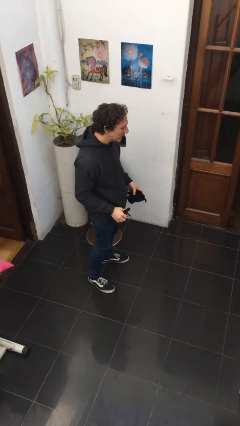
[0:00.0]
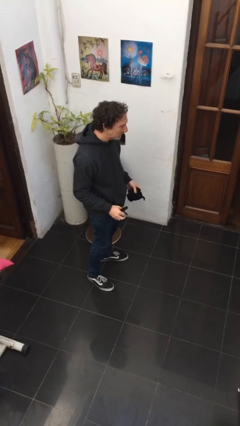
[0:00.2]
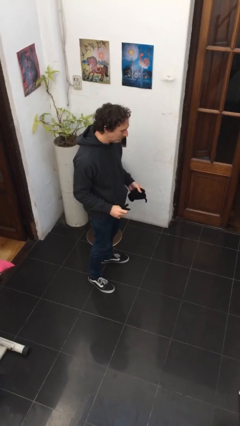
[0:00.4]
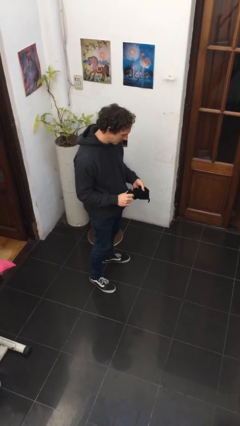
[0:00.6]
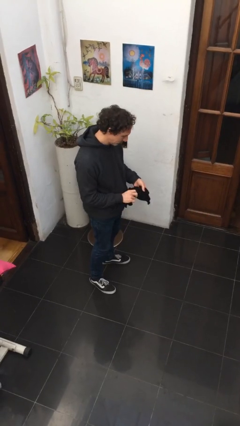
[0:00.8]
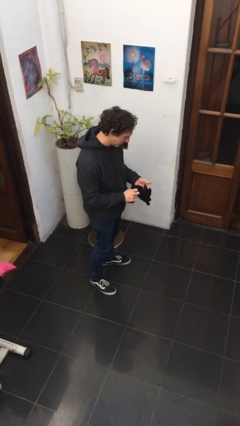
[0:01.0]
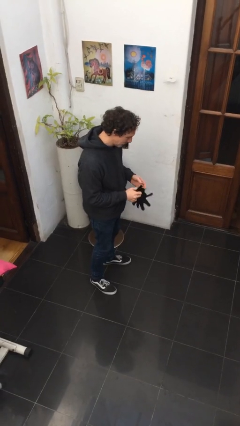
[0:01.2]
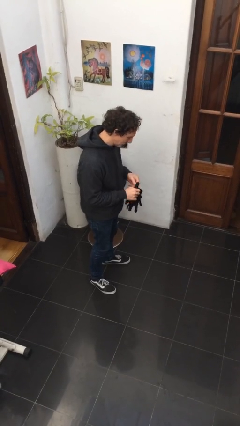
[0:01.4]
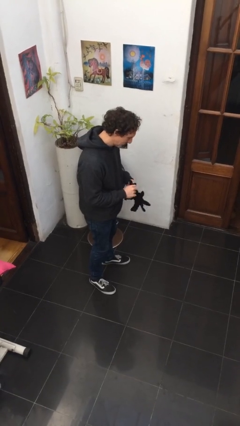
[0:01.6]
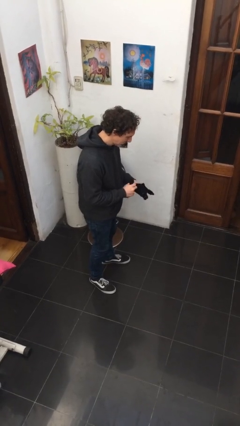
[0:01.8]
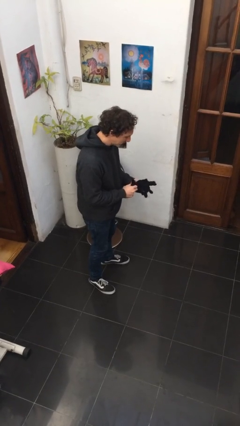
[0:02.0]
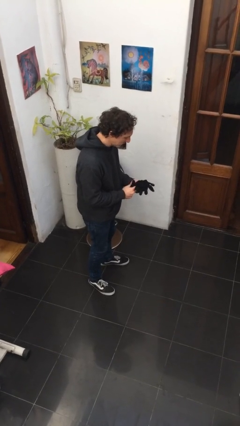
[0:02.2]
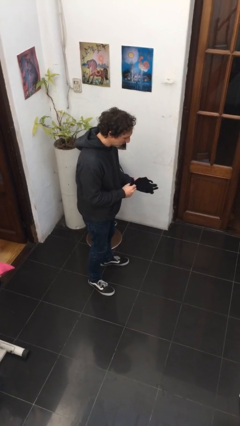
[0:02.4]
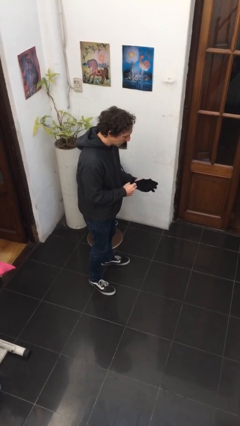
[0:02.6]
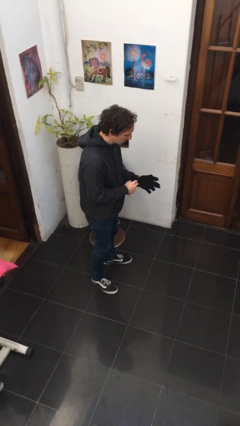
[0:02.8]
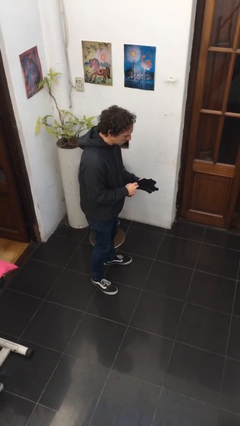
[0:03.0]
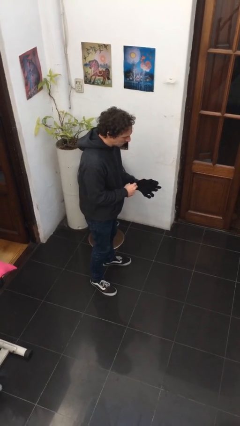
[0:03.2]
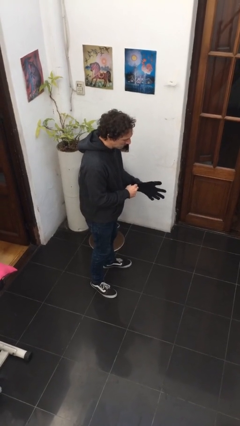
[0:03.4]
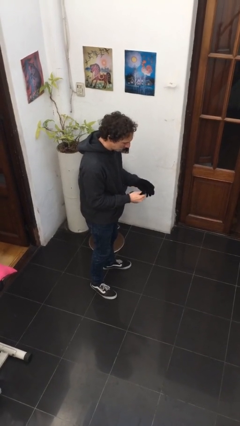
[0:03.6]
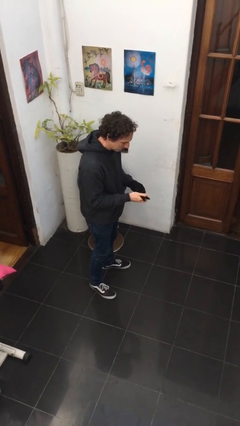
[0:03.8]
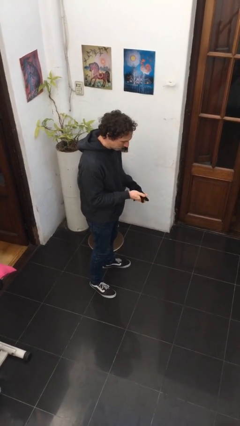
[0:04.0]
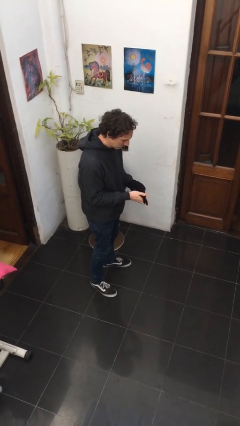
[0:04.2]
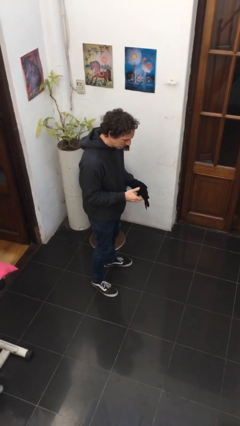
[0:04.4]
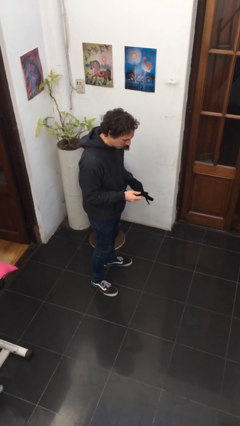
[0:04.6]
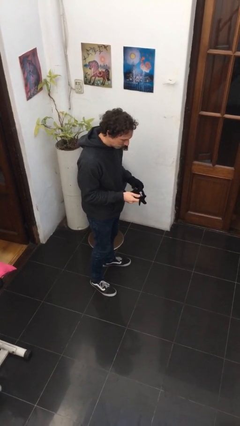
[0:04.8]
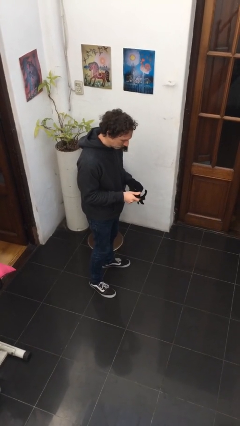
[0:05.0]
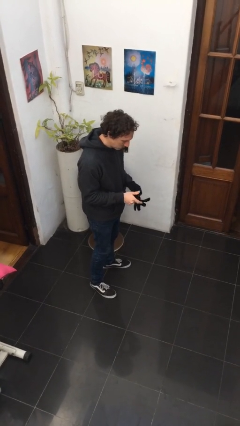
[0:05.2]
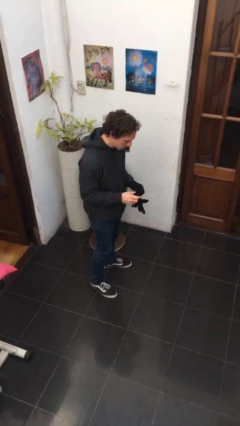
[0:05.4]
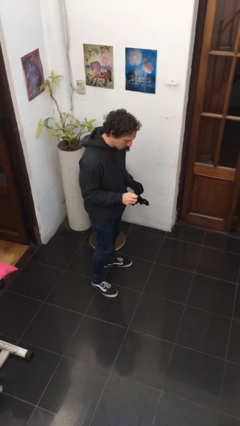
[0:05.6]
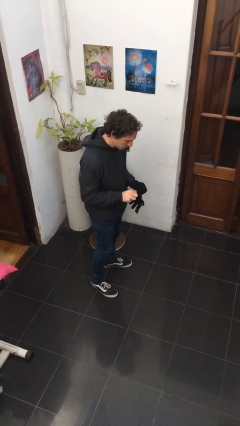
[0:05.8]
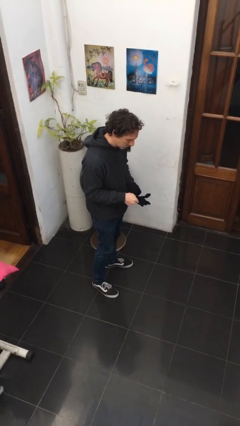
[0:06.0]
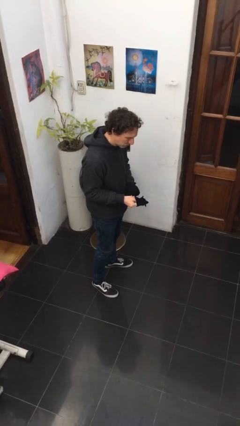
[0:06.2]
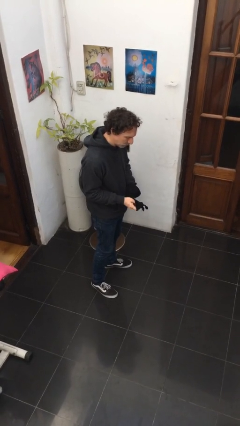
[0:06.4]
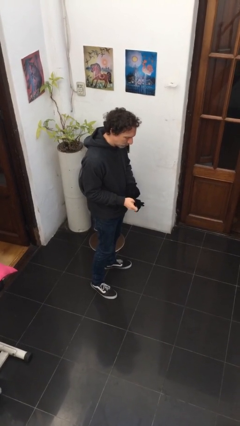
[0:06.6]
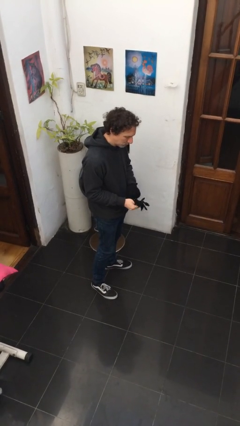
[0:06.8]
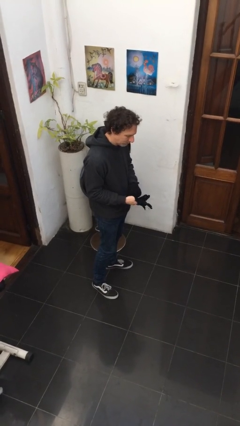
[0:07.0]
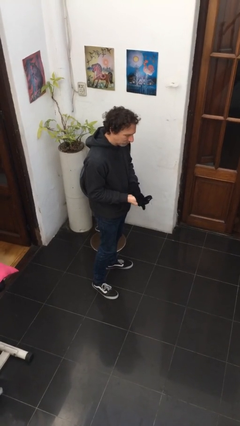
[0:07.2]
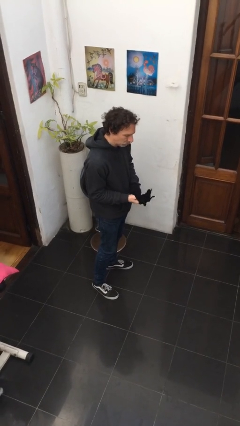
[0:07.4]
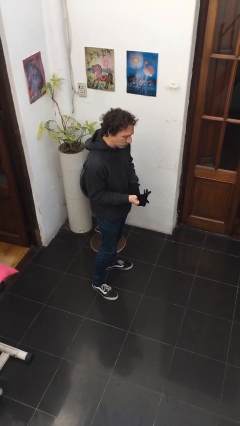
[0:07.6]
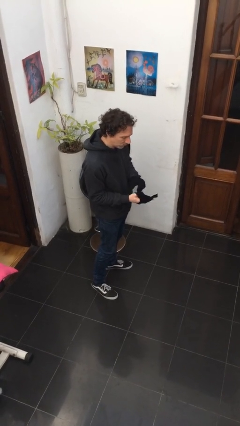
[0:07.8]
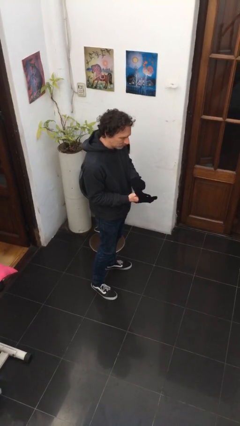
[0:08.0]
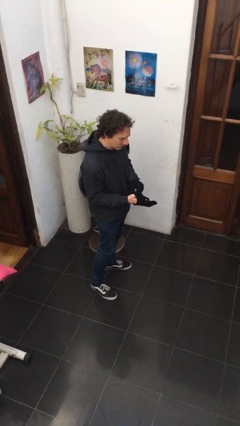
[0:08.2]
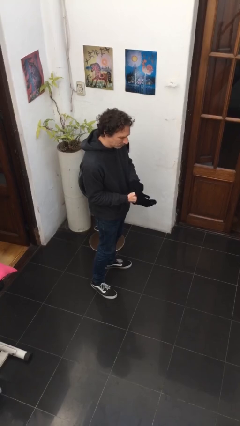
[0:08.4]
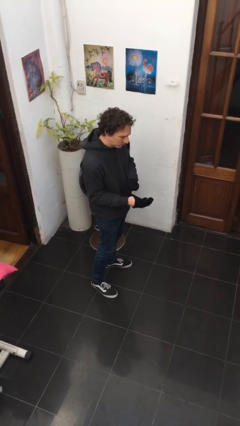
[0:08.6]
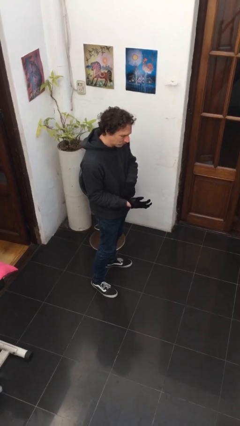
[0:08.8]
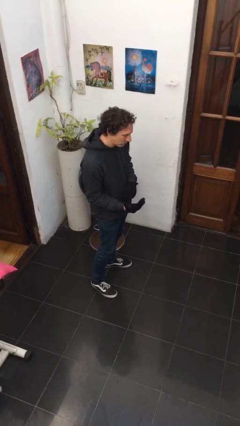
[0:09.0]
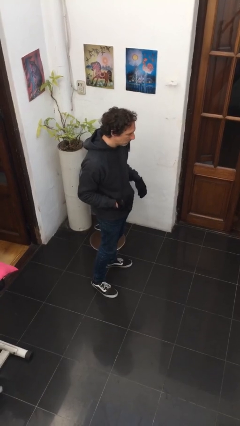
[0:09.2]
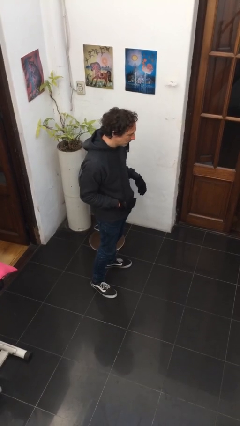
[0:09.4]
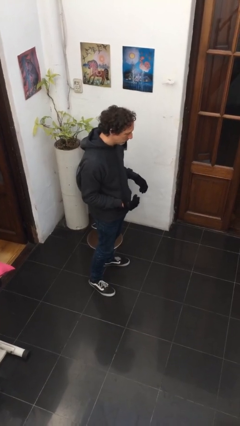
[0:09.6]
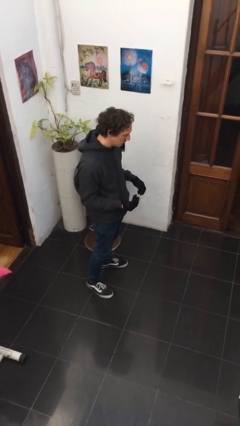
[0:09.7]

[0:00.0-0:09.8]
person puts on gloves

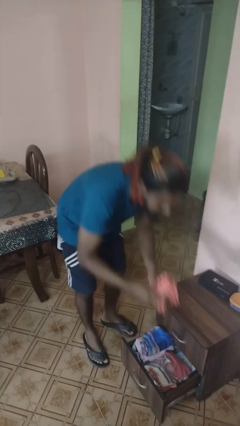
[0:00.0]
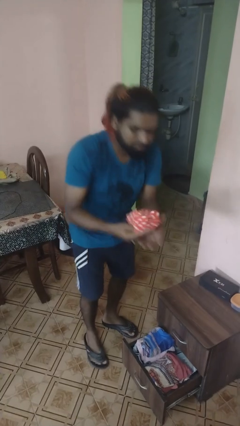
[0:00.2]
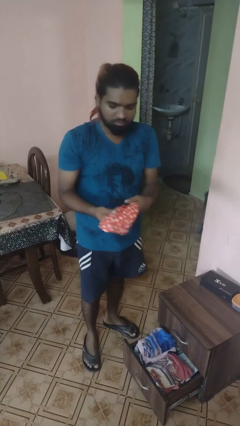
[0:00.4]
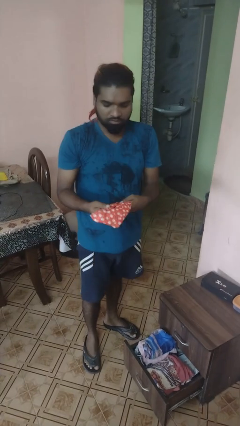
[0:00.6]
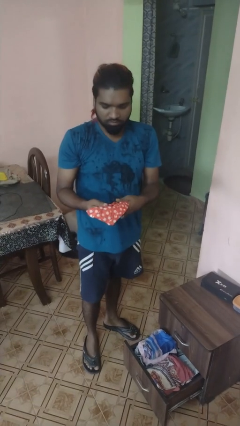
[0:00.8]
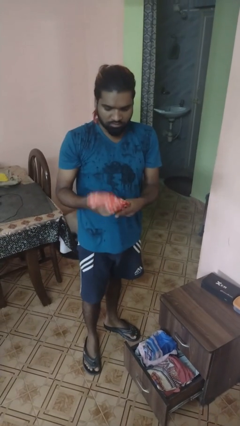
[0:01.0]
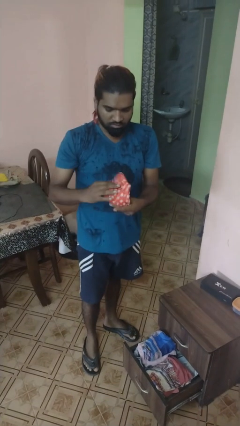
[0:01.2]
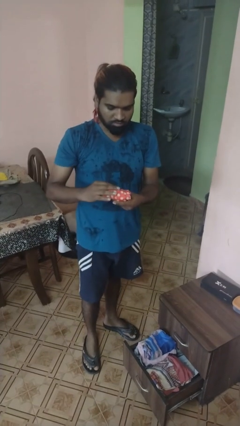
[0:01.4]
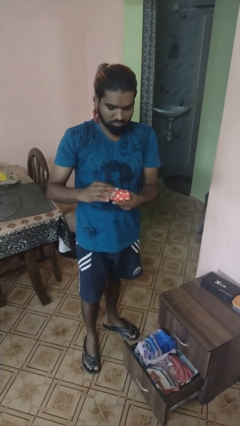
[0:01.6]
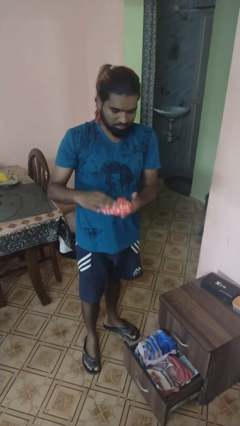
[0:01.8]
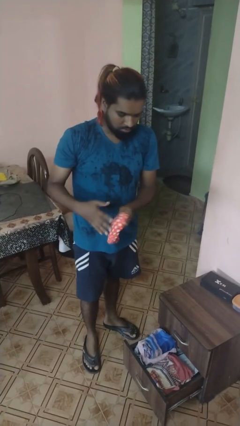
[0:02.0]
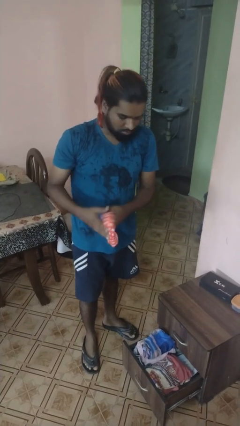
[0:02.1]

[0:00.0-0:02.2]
person takes clothes from dresser

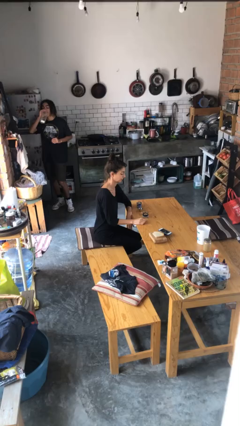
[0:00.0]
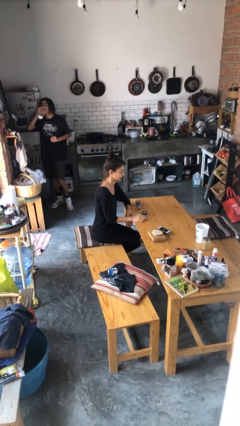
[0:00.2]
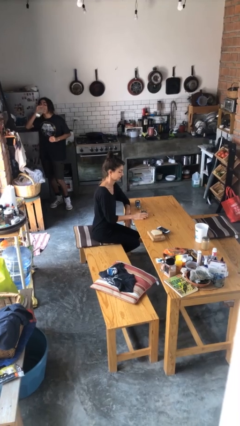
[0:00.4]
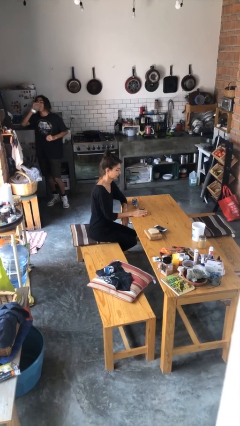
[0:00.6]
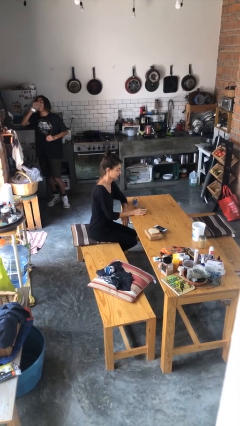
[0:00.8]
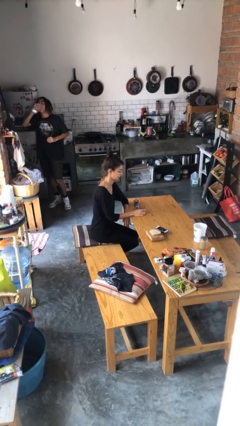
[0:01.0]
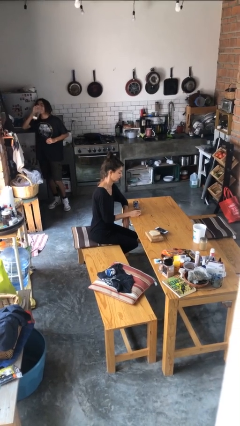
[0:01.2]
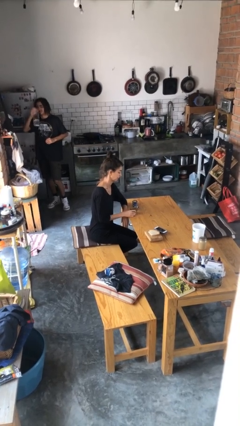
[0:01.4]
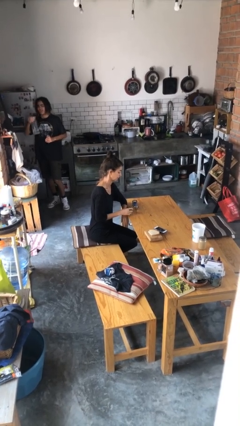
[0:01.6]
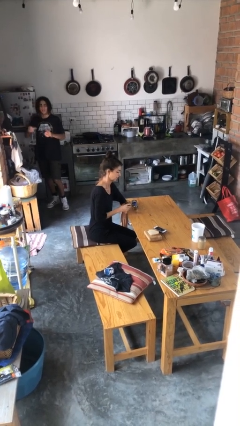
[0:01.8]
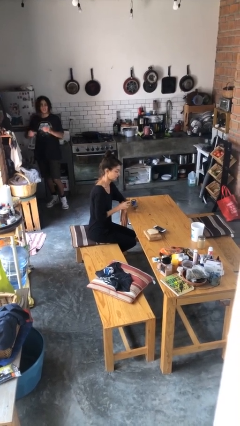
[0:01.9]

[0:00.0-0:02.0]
person picks up object from table

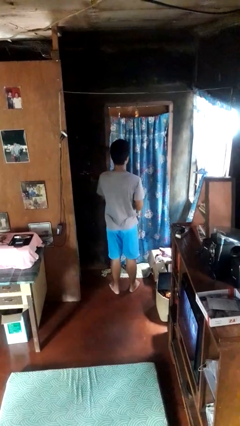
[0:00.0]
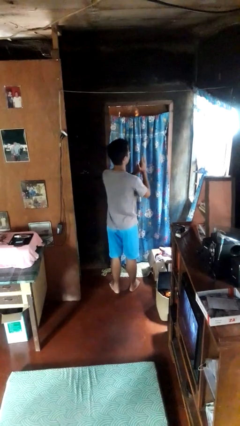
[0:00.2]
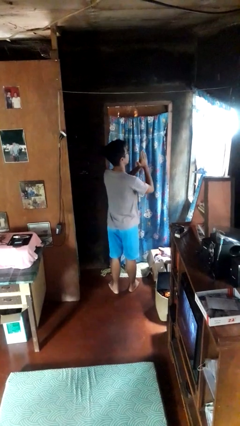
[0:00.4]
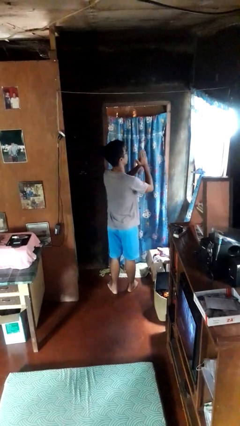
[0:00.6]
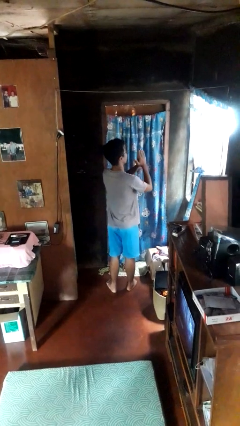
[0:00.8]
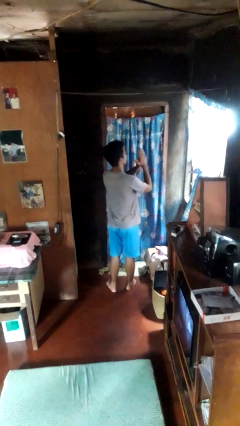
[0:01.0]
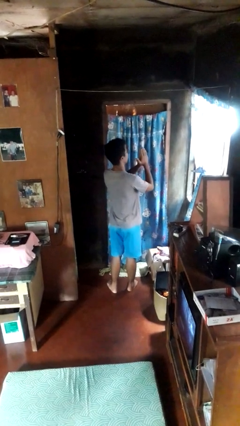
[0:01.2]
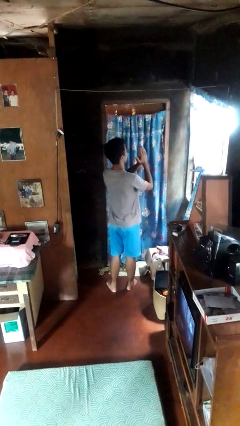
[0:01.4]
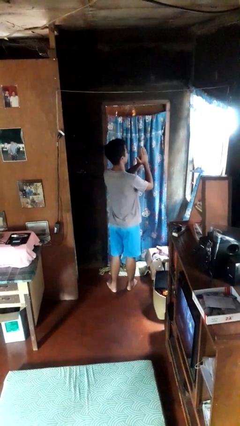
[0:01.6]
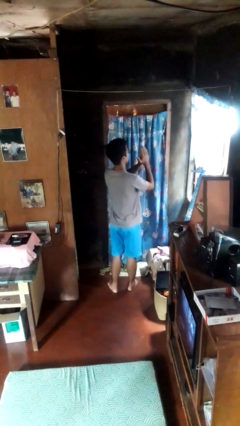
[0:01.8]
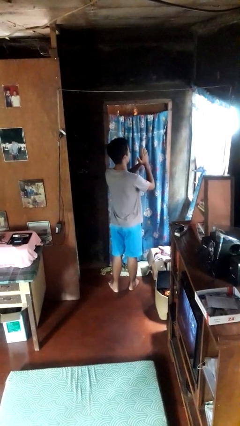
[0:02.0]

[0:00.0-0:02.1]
person prays

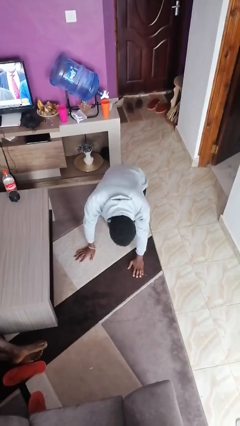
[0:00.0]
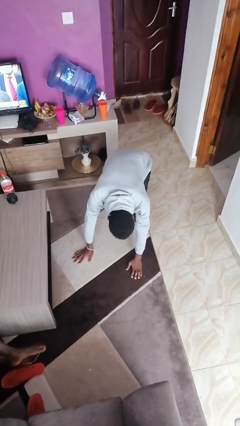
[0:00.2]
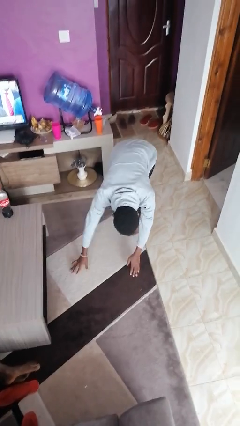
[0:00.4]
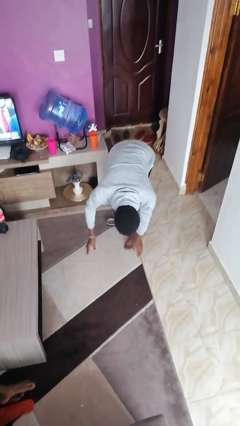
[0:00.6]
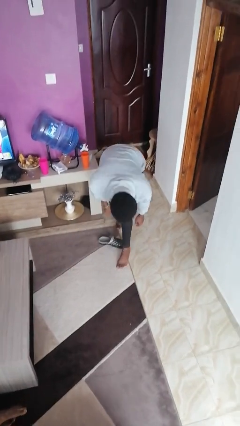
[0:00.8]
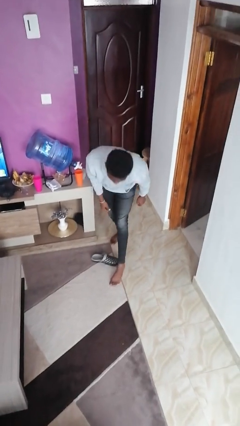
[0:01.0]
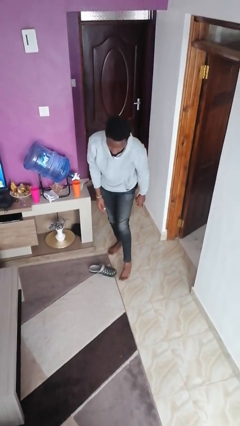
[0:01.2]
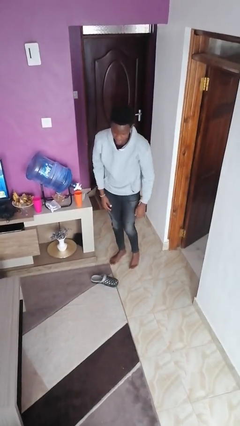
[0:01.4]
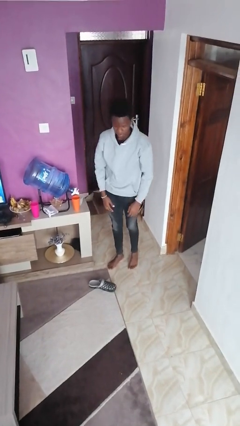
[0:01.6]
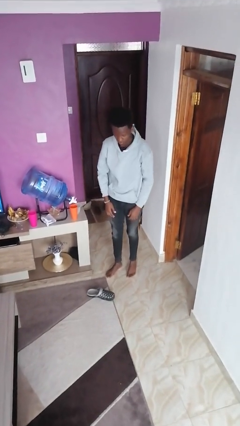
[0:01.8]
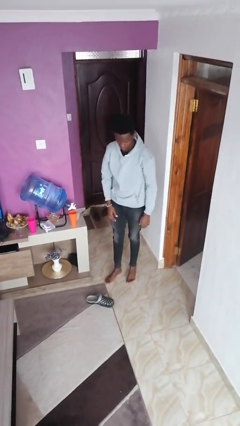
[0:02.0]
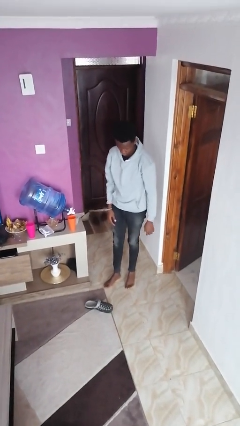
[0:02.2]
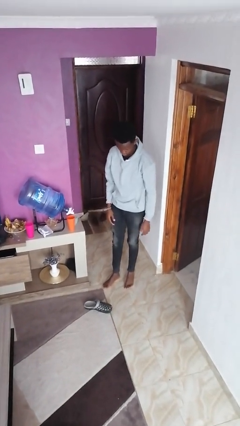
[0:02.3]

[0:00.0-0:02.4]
person stands up from floor
